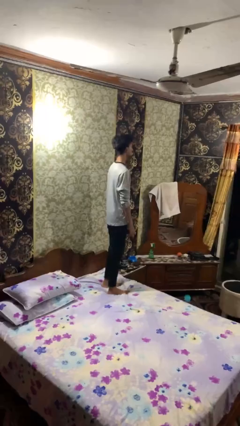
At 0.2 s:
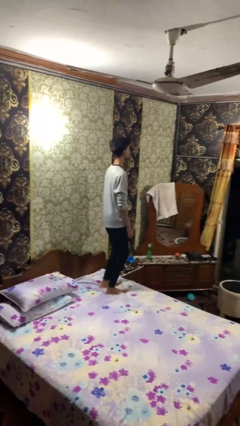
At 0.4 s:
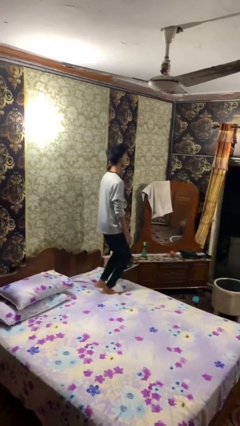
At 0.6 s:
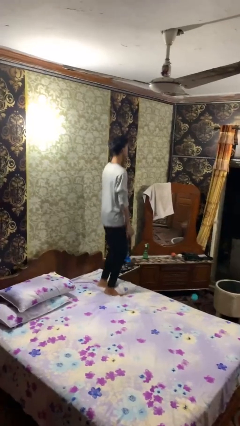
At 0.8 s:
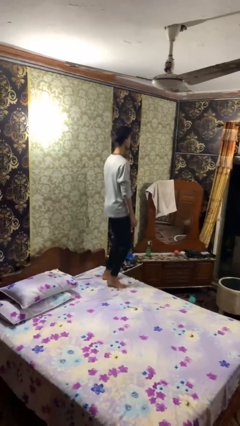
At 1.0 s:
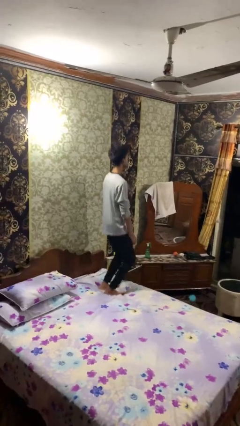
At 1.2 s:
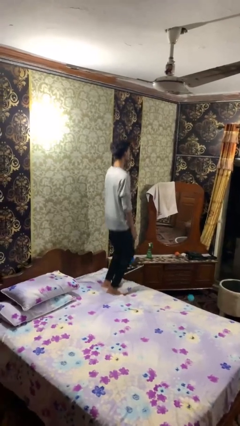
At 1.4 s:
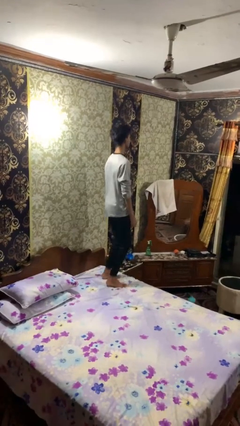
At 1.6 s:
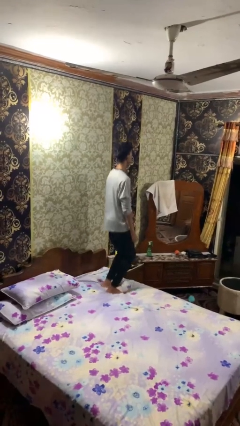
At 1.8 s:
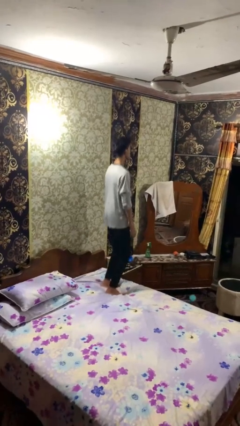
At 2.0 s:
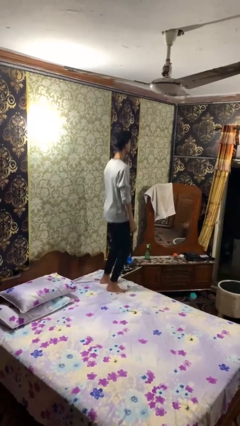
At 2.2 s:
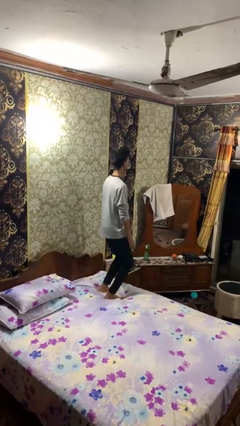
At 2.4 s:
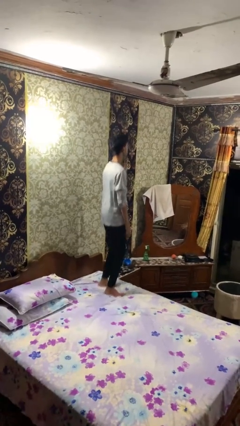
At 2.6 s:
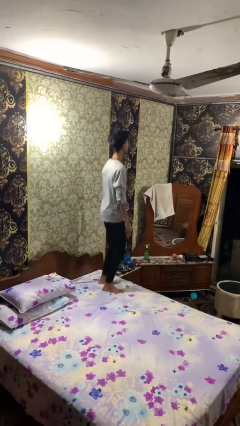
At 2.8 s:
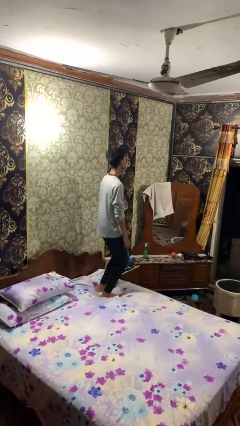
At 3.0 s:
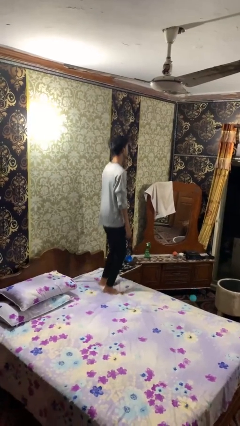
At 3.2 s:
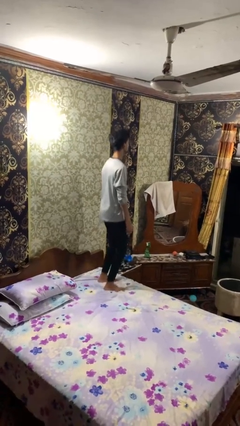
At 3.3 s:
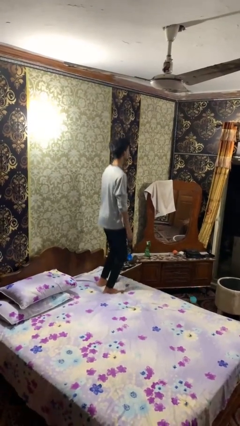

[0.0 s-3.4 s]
person jumps on bed

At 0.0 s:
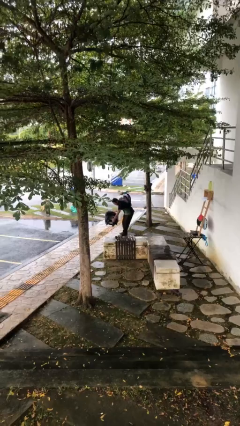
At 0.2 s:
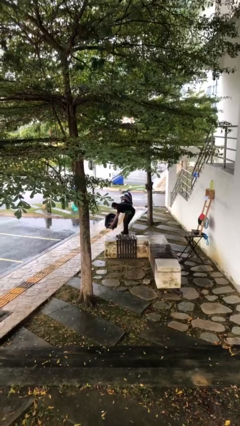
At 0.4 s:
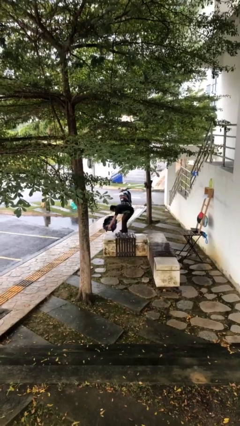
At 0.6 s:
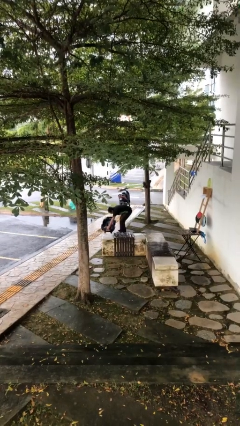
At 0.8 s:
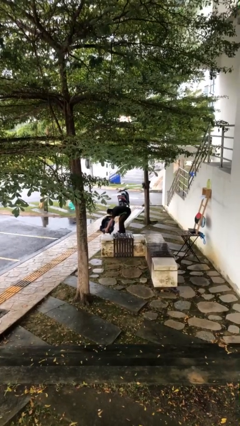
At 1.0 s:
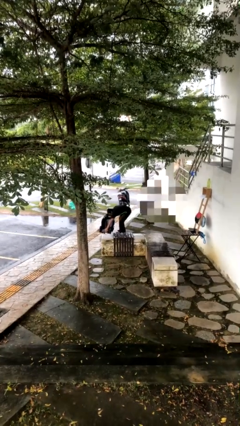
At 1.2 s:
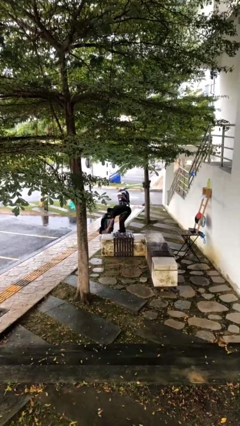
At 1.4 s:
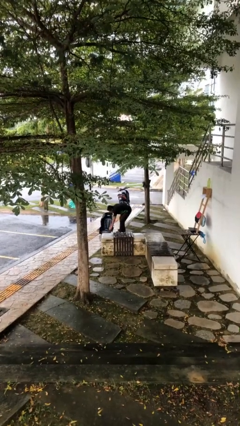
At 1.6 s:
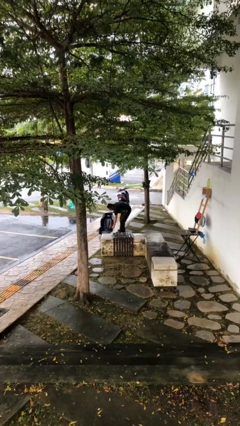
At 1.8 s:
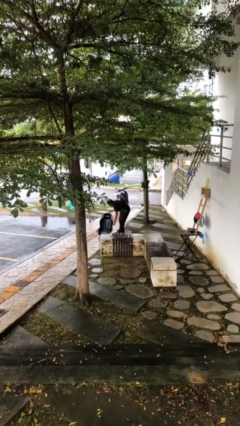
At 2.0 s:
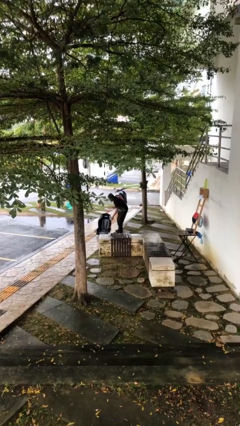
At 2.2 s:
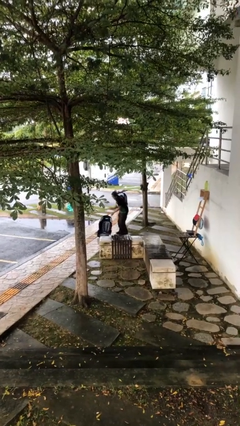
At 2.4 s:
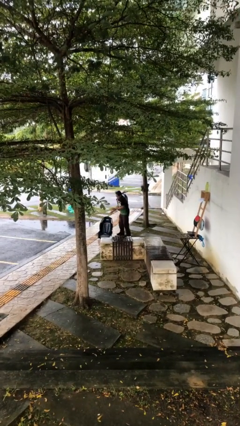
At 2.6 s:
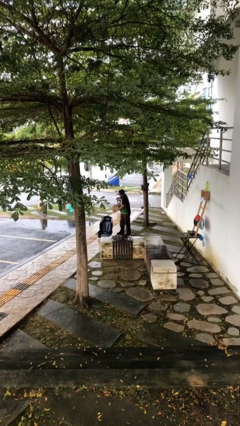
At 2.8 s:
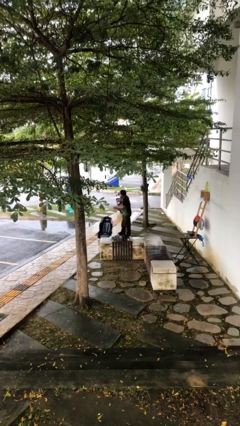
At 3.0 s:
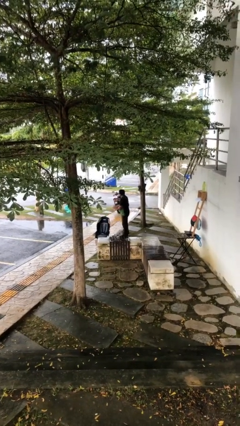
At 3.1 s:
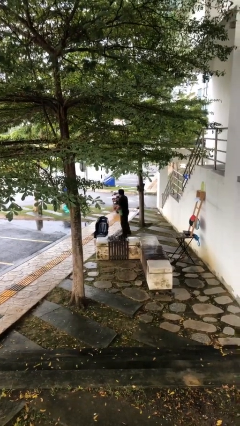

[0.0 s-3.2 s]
person puts down object on floor

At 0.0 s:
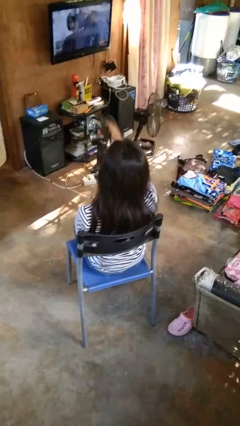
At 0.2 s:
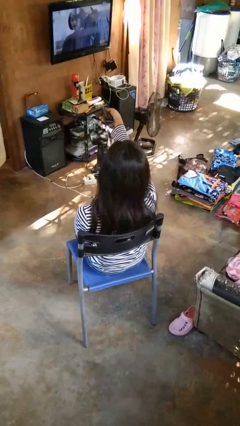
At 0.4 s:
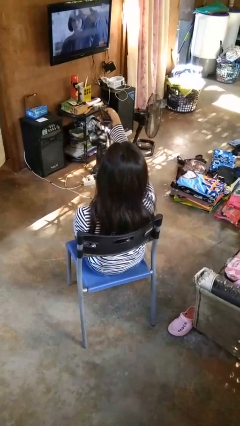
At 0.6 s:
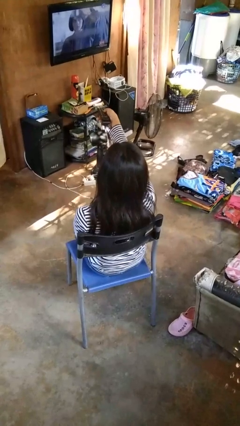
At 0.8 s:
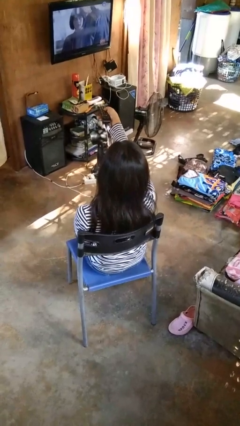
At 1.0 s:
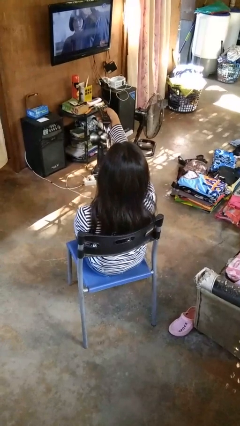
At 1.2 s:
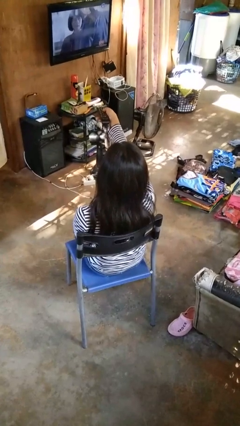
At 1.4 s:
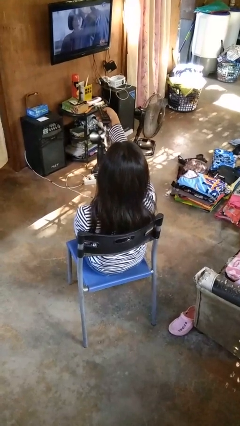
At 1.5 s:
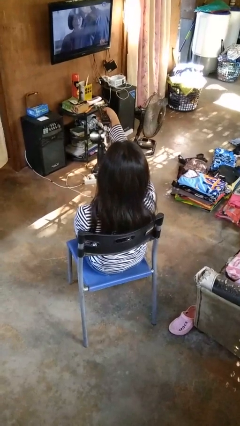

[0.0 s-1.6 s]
person uses television remote

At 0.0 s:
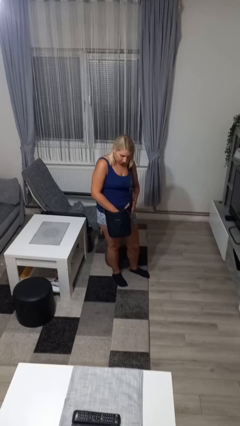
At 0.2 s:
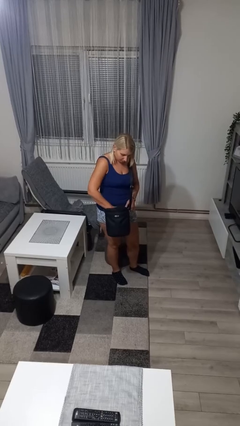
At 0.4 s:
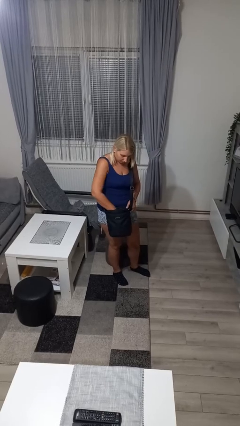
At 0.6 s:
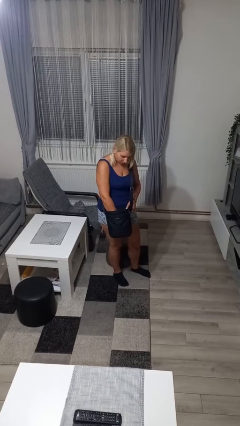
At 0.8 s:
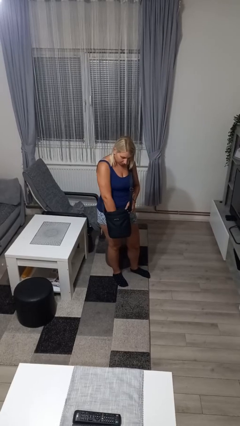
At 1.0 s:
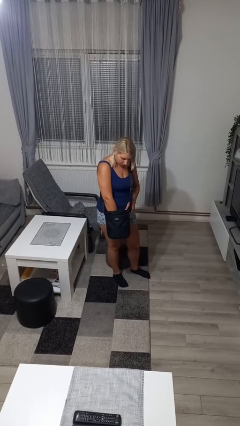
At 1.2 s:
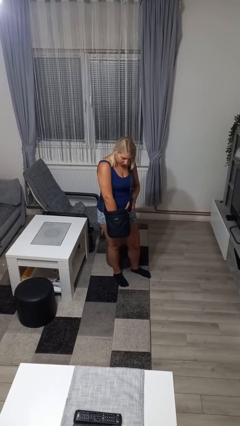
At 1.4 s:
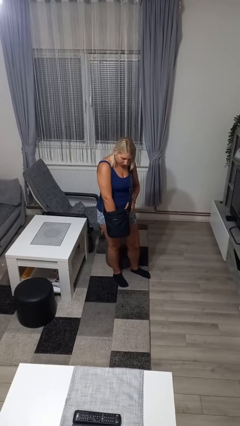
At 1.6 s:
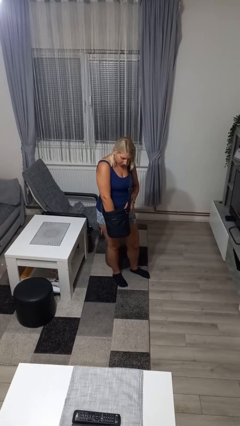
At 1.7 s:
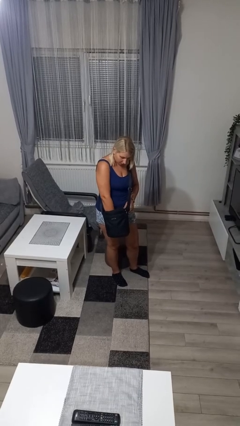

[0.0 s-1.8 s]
person searches in purse

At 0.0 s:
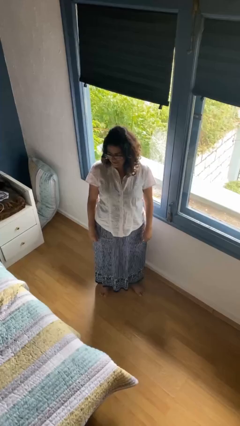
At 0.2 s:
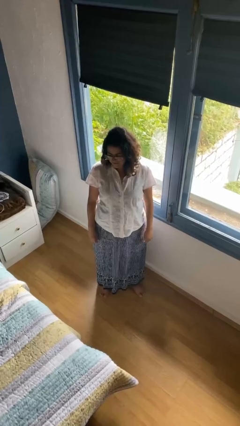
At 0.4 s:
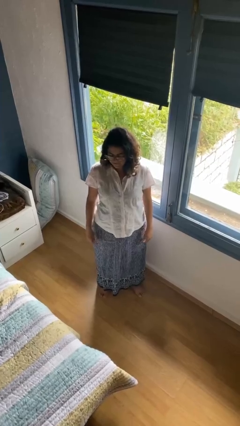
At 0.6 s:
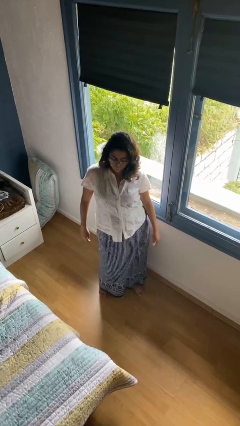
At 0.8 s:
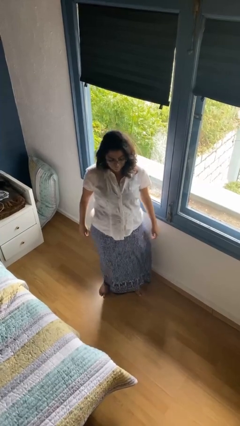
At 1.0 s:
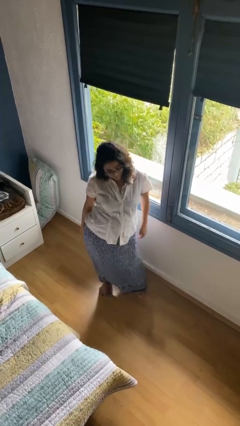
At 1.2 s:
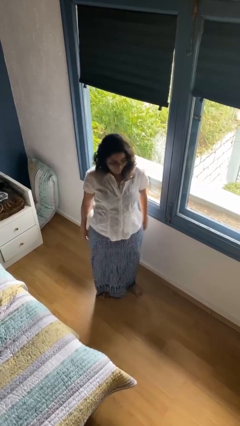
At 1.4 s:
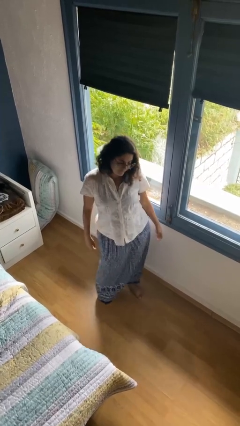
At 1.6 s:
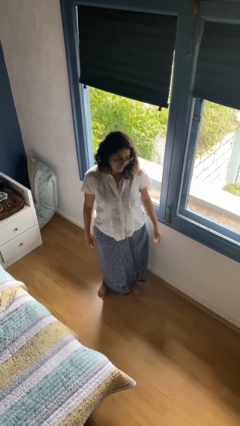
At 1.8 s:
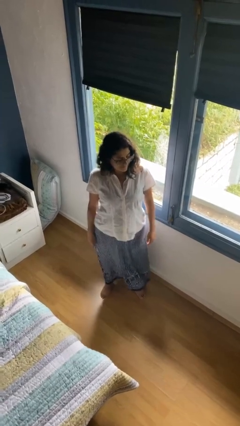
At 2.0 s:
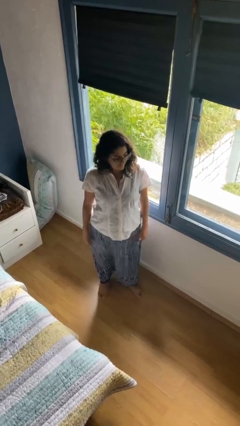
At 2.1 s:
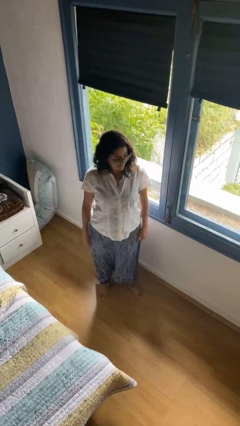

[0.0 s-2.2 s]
person wiggles hips

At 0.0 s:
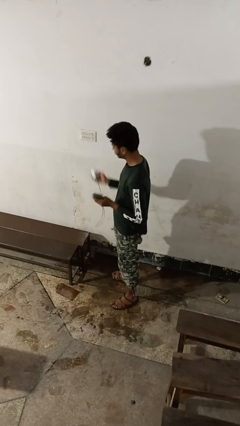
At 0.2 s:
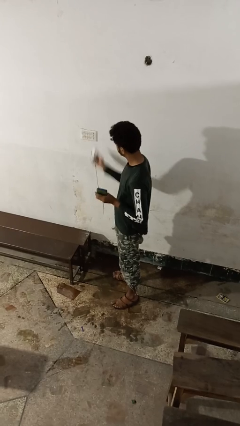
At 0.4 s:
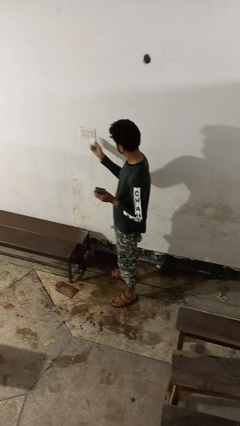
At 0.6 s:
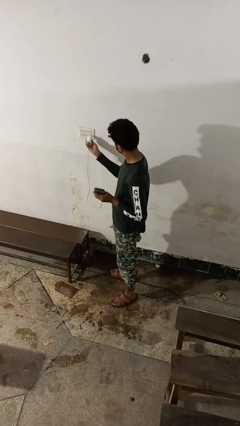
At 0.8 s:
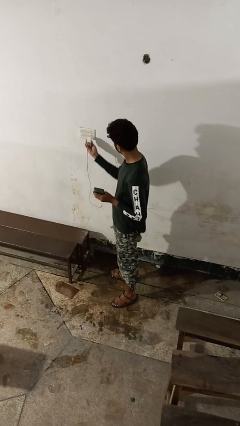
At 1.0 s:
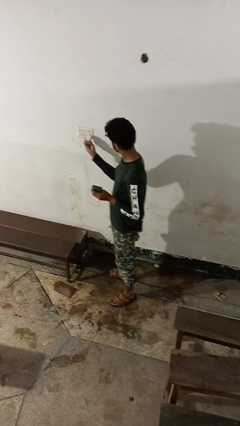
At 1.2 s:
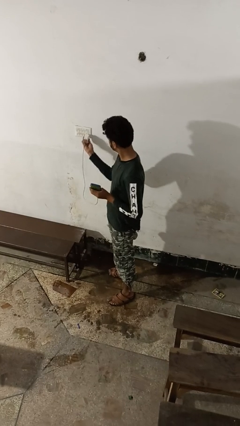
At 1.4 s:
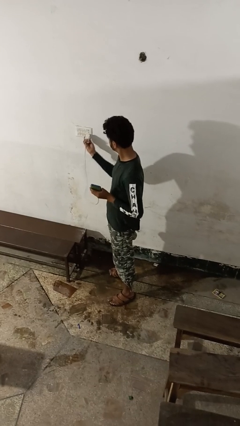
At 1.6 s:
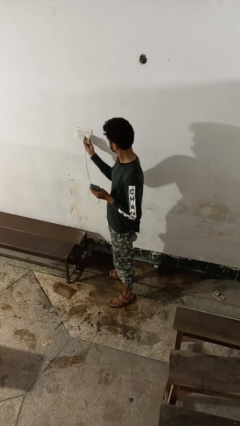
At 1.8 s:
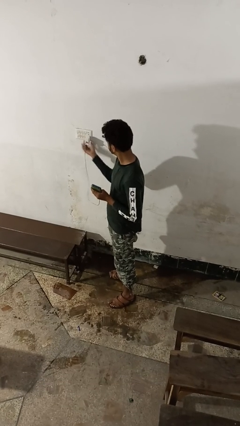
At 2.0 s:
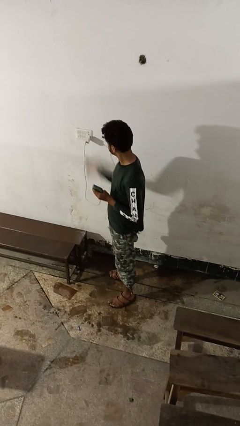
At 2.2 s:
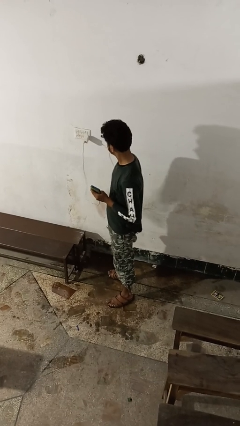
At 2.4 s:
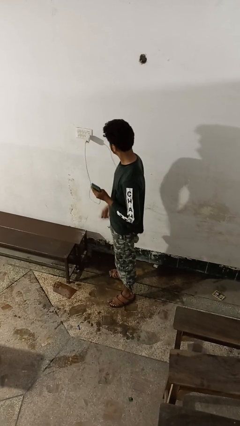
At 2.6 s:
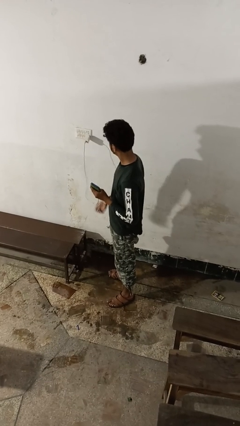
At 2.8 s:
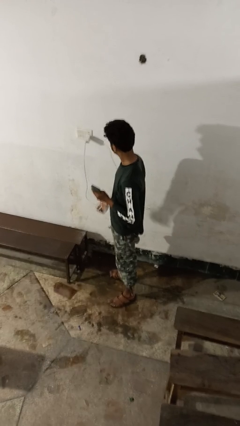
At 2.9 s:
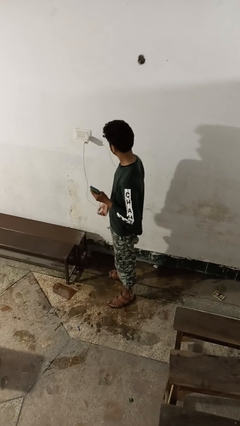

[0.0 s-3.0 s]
person plugs into electrical socket

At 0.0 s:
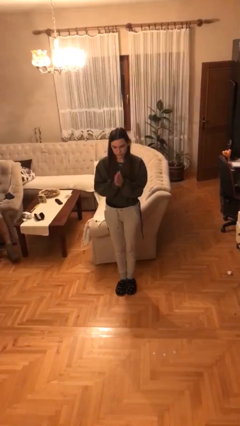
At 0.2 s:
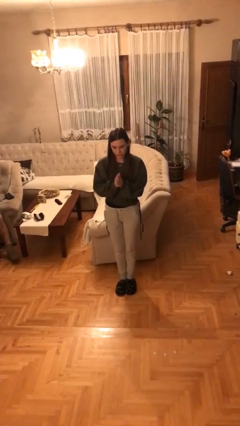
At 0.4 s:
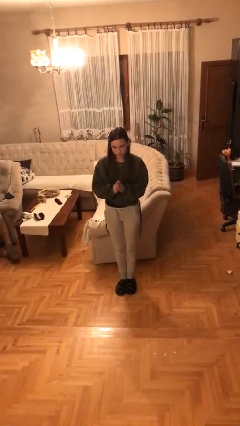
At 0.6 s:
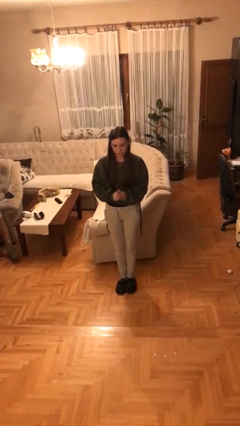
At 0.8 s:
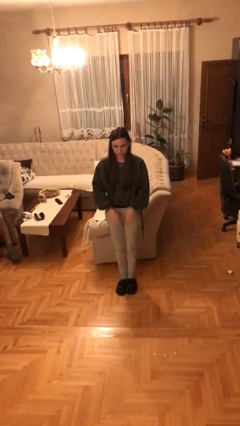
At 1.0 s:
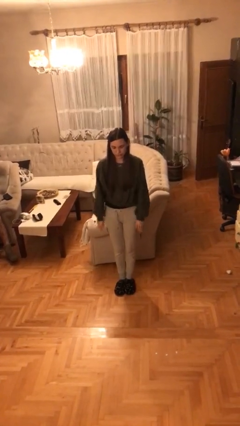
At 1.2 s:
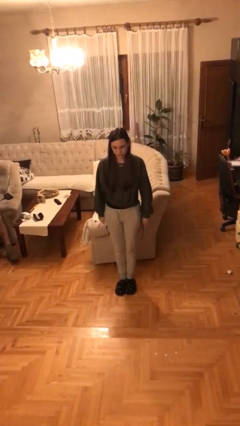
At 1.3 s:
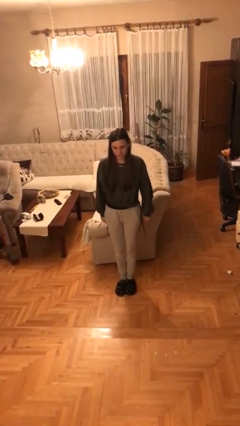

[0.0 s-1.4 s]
person claps hands

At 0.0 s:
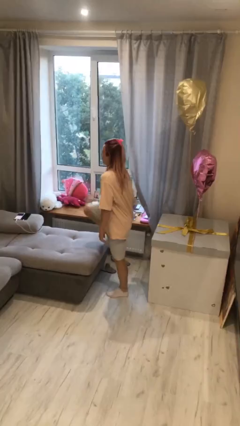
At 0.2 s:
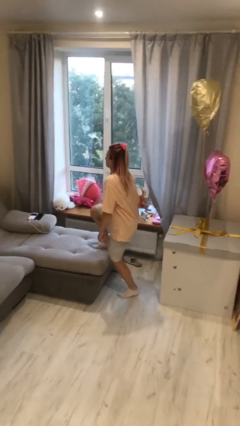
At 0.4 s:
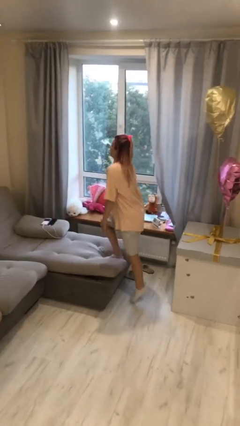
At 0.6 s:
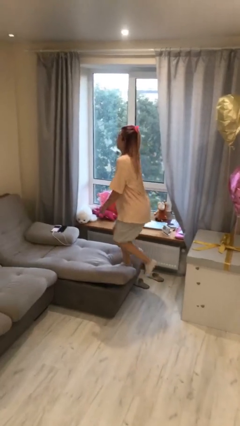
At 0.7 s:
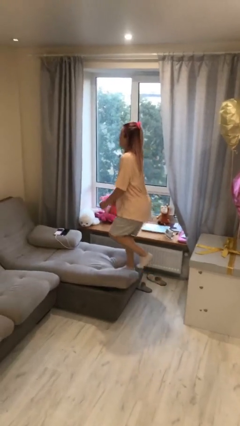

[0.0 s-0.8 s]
person climbs on couch
